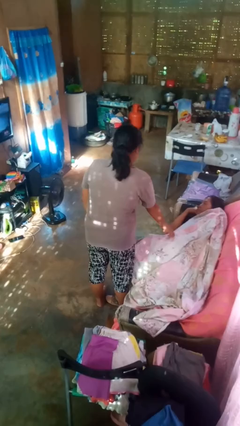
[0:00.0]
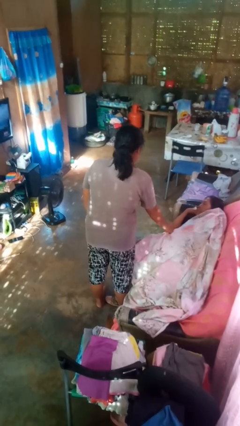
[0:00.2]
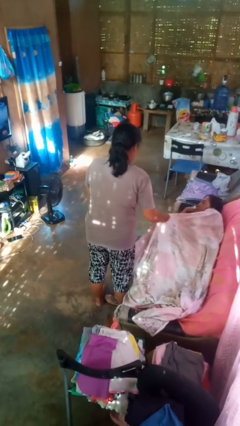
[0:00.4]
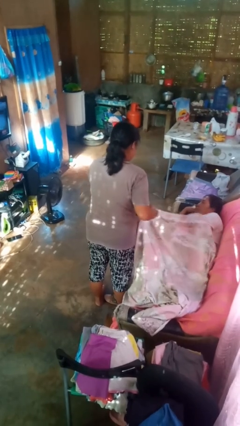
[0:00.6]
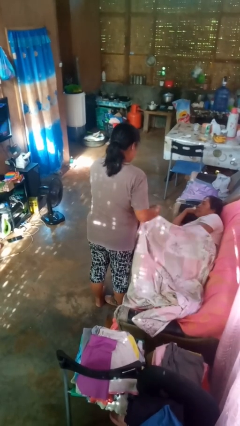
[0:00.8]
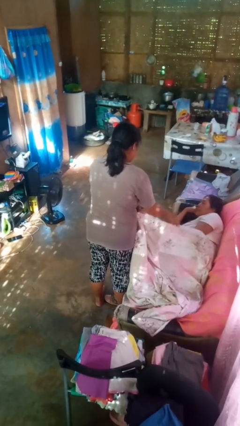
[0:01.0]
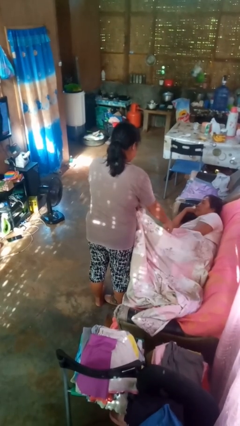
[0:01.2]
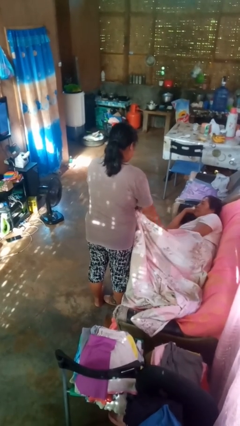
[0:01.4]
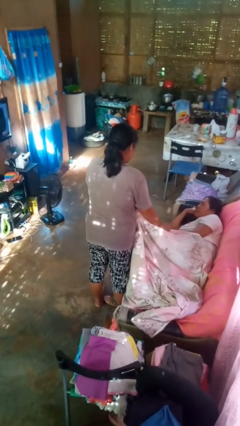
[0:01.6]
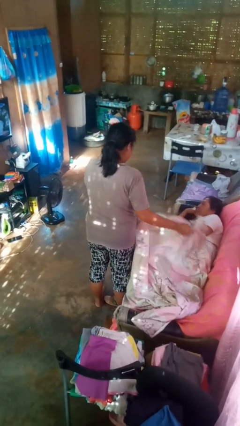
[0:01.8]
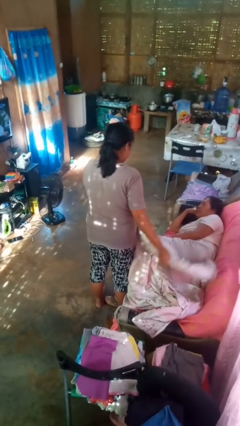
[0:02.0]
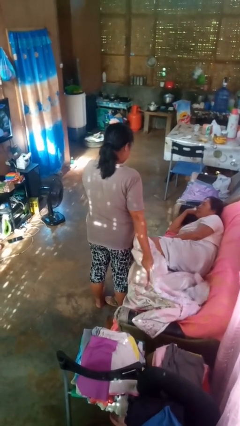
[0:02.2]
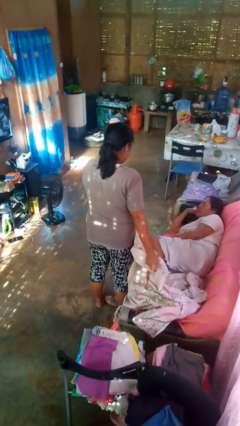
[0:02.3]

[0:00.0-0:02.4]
person uncovers friend with blanket

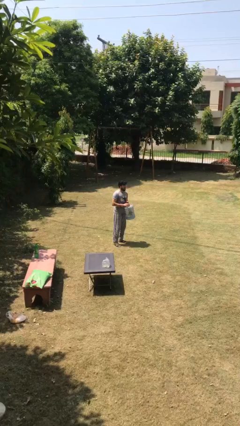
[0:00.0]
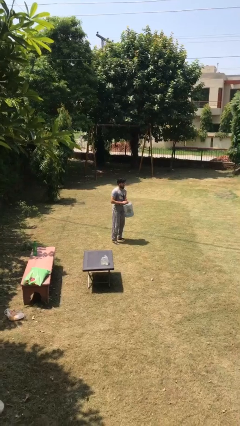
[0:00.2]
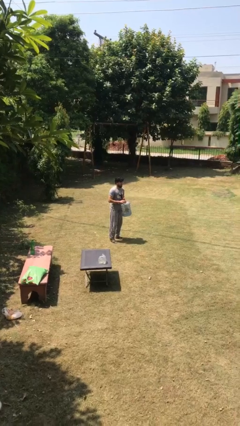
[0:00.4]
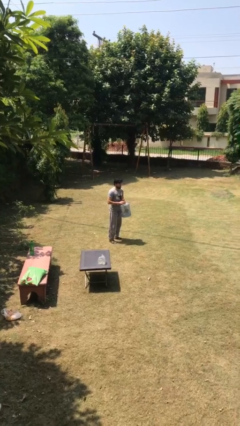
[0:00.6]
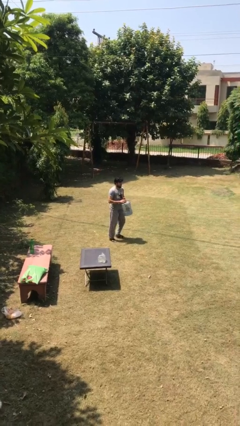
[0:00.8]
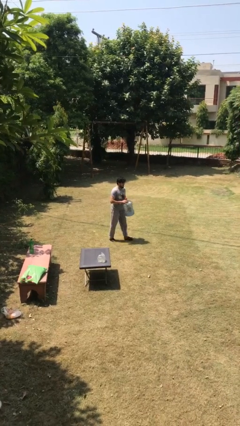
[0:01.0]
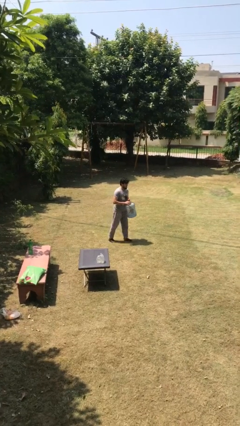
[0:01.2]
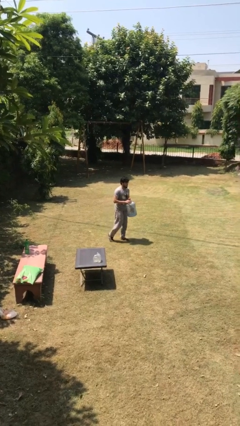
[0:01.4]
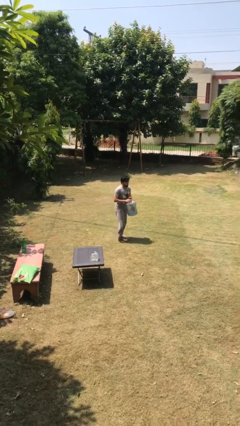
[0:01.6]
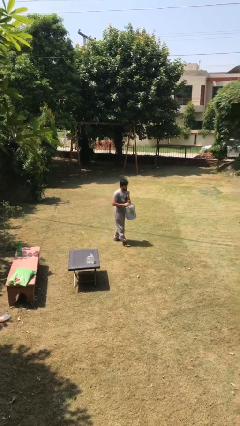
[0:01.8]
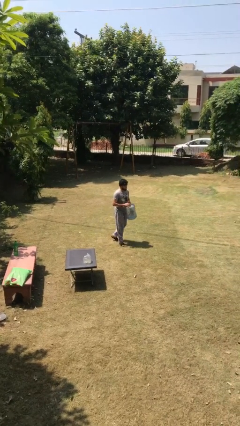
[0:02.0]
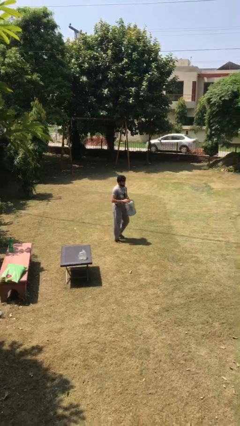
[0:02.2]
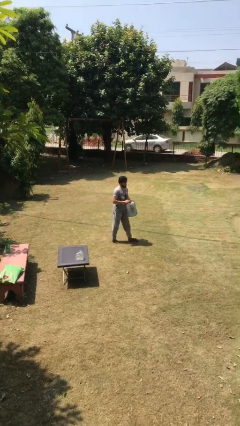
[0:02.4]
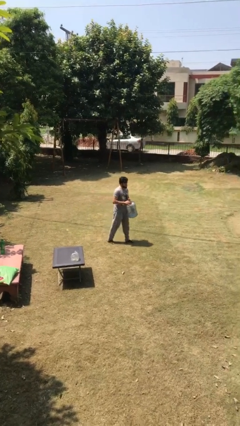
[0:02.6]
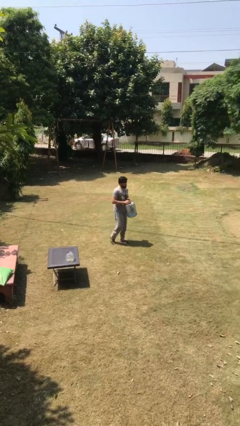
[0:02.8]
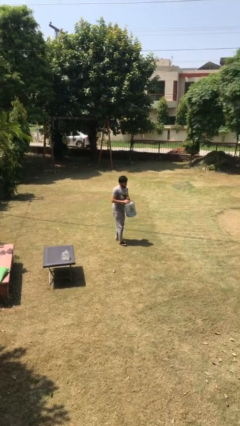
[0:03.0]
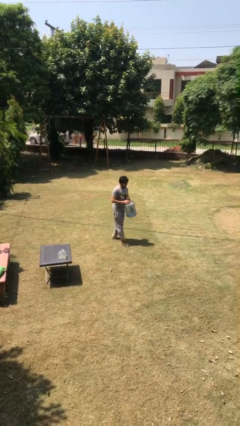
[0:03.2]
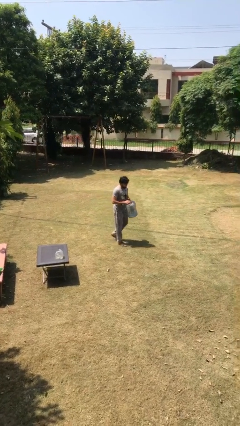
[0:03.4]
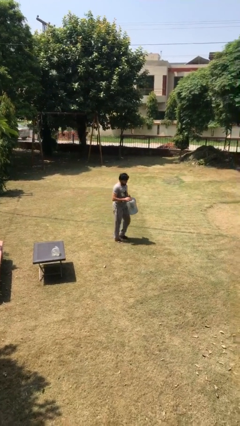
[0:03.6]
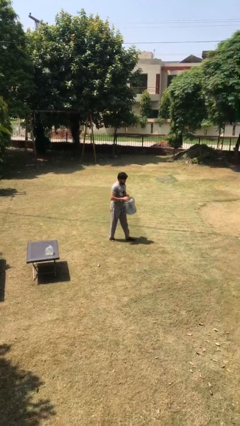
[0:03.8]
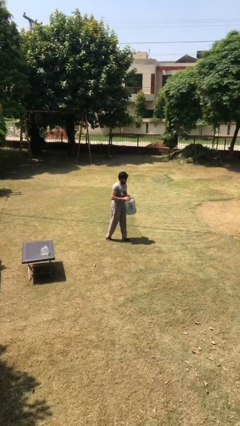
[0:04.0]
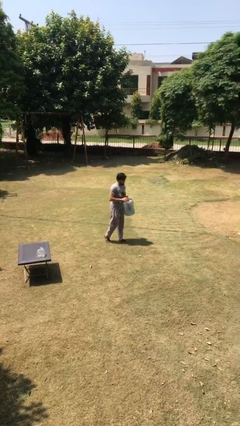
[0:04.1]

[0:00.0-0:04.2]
person carries heavy object

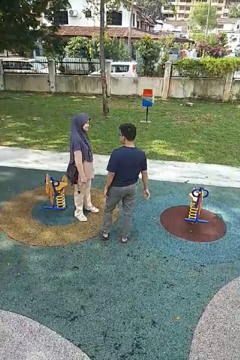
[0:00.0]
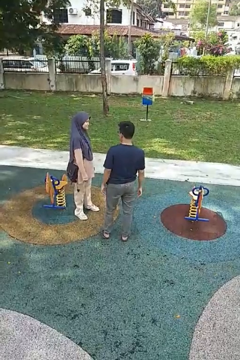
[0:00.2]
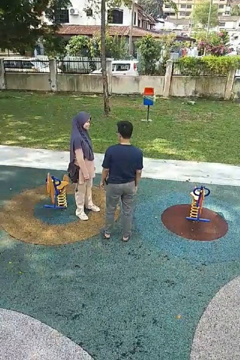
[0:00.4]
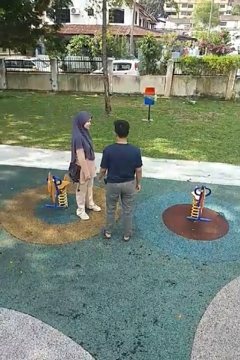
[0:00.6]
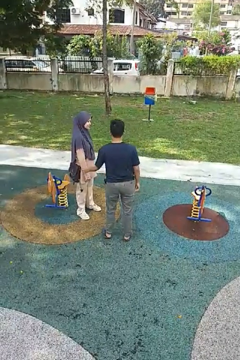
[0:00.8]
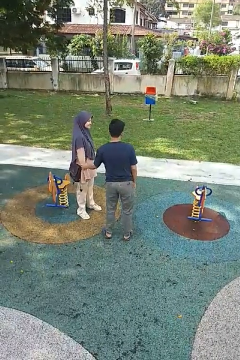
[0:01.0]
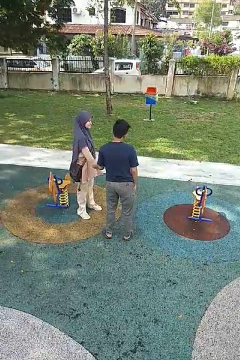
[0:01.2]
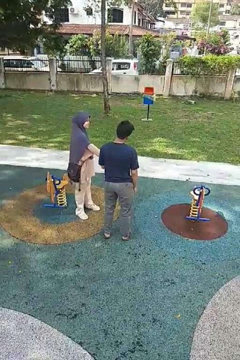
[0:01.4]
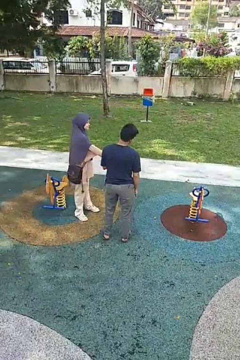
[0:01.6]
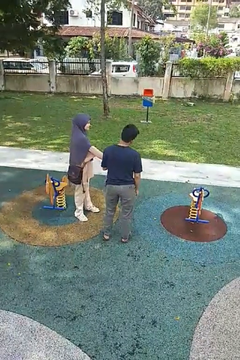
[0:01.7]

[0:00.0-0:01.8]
person grabs person by forearm

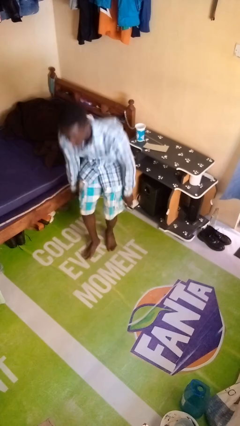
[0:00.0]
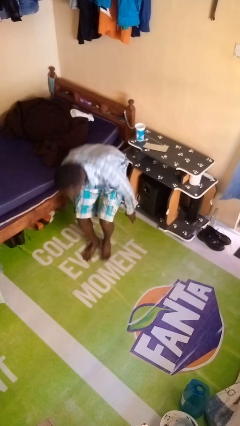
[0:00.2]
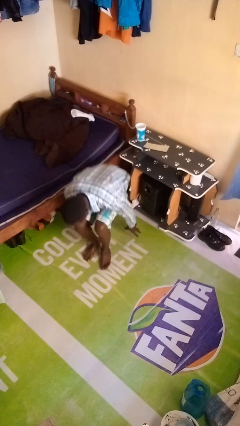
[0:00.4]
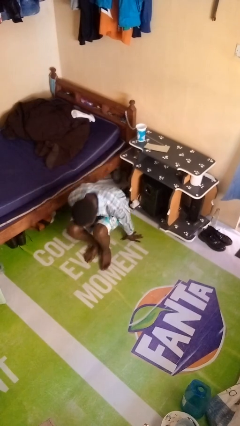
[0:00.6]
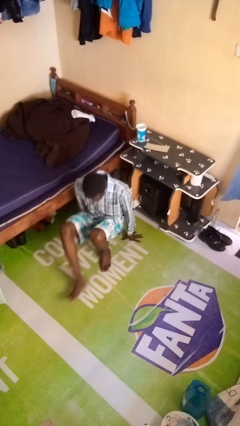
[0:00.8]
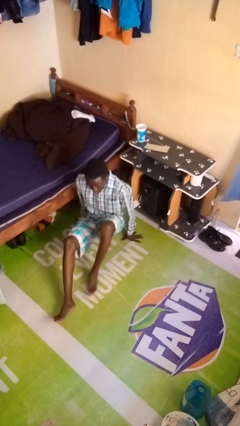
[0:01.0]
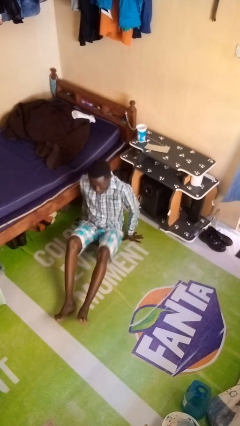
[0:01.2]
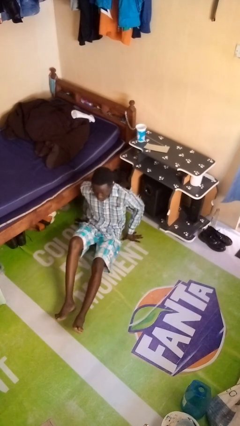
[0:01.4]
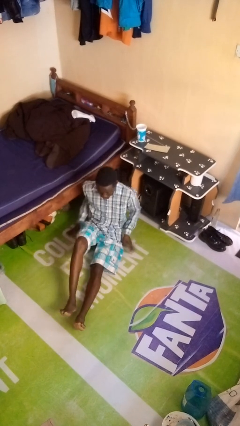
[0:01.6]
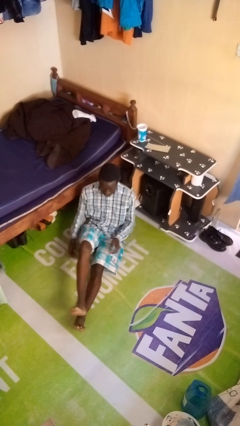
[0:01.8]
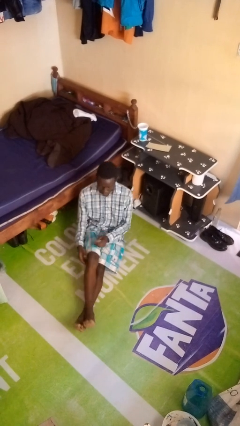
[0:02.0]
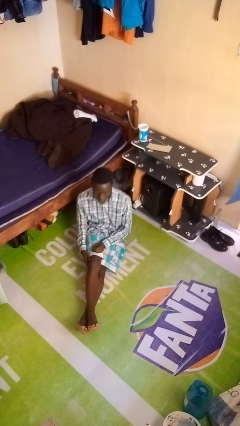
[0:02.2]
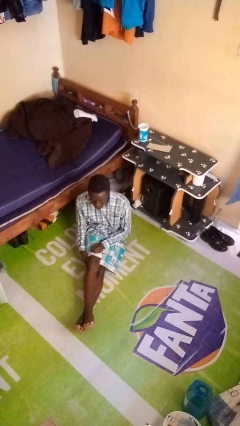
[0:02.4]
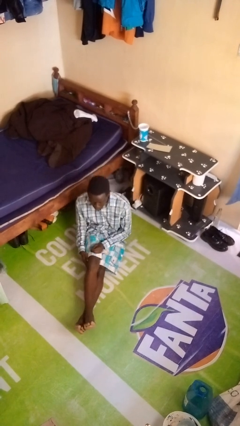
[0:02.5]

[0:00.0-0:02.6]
person sits crisscross

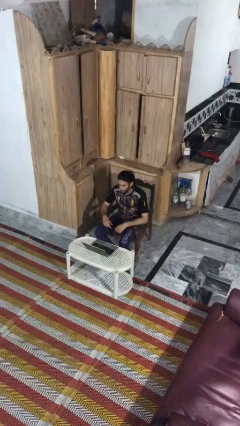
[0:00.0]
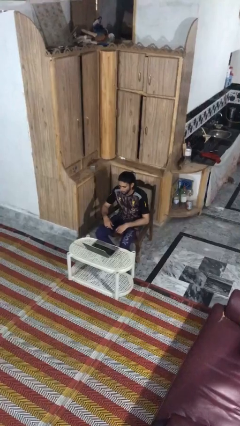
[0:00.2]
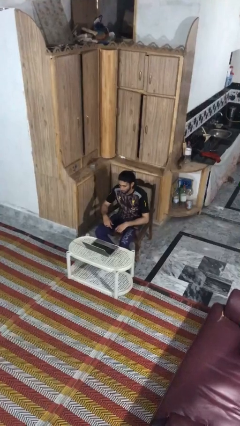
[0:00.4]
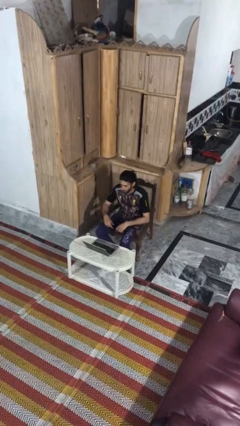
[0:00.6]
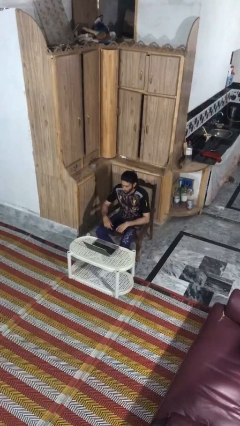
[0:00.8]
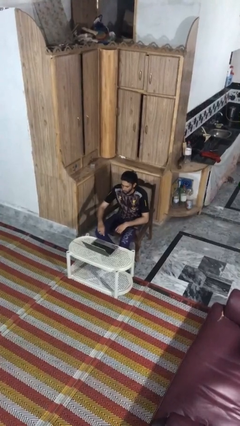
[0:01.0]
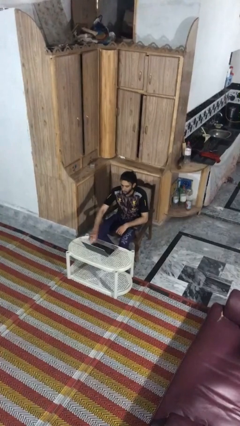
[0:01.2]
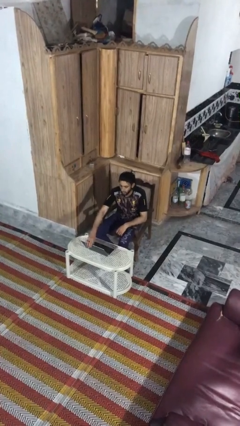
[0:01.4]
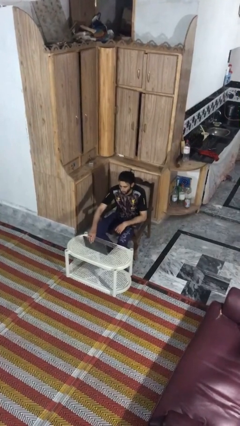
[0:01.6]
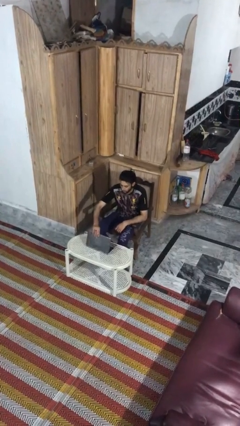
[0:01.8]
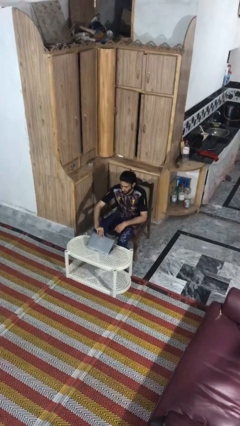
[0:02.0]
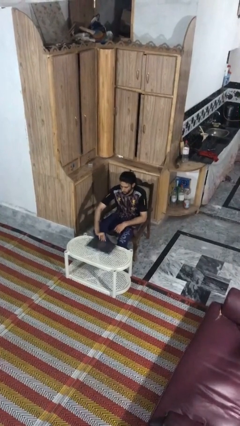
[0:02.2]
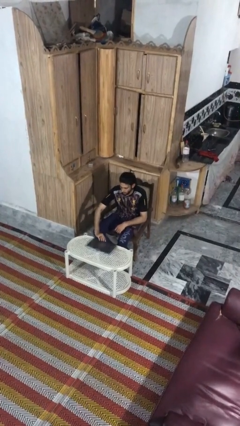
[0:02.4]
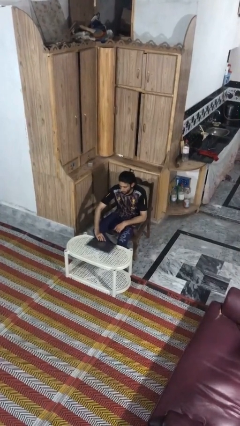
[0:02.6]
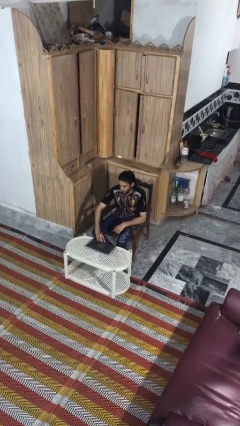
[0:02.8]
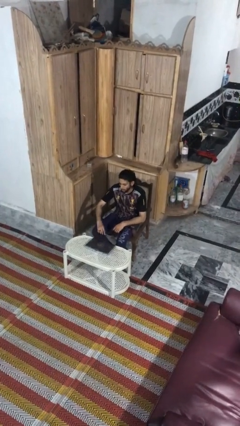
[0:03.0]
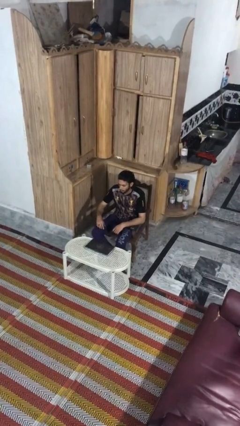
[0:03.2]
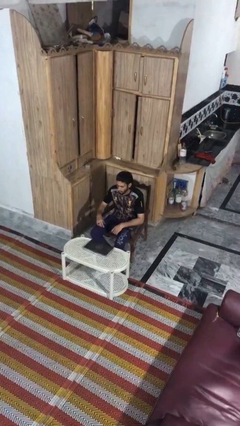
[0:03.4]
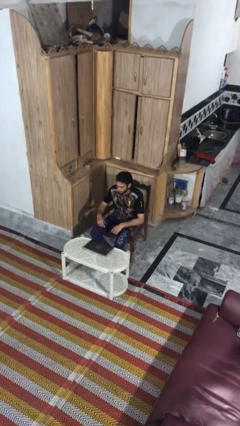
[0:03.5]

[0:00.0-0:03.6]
person closes laptop

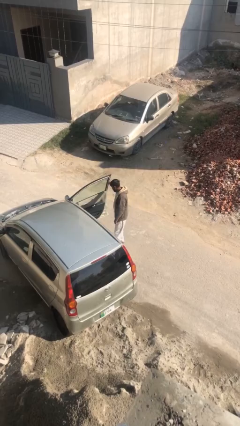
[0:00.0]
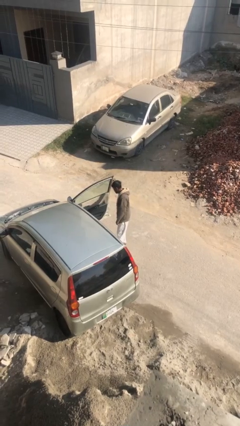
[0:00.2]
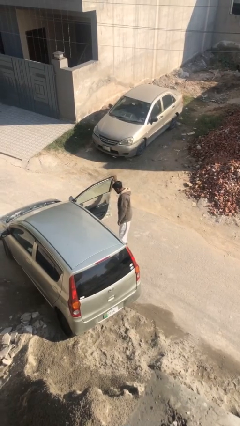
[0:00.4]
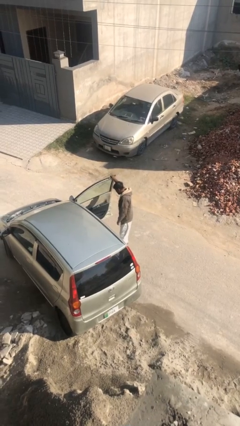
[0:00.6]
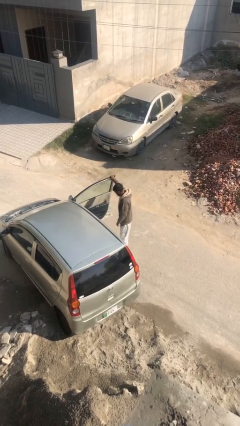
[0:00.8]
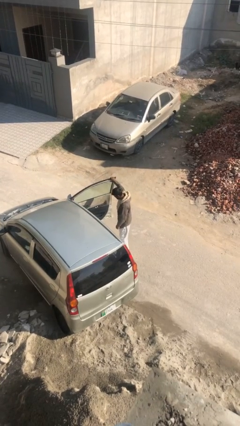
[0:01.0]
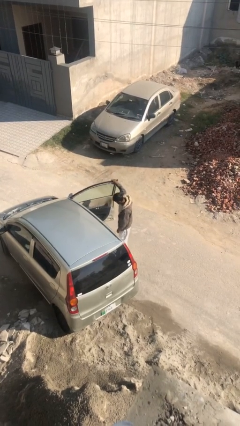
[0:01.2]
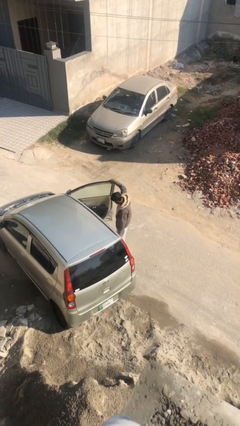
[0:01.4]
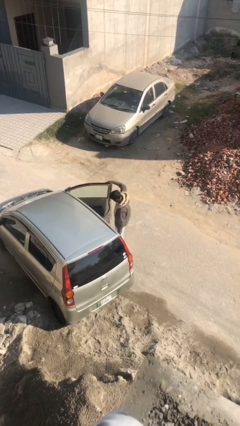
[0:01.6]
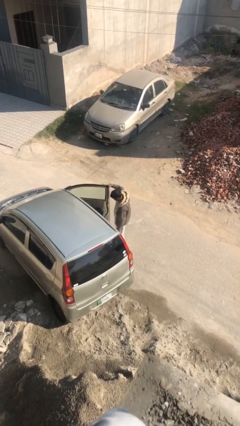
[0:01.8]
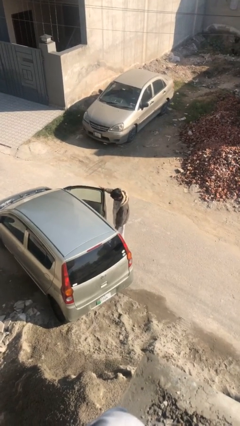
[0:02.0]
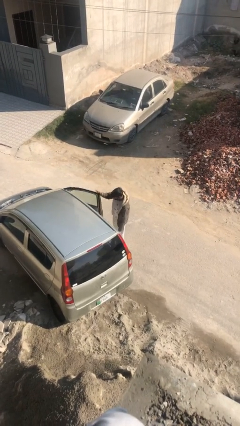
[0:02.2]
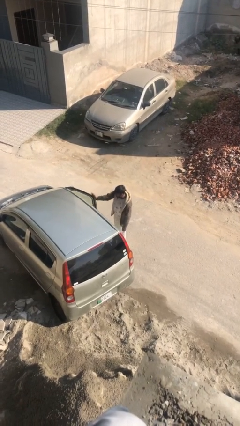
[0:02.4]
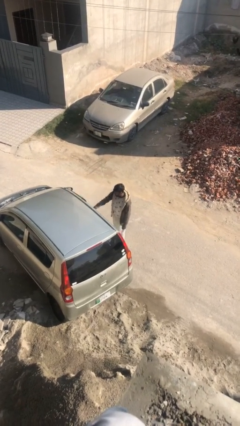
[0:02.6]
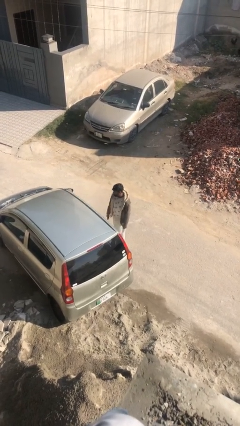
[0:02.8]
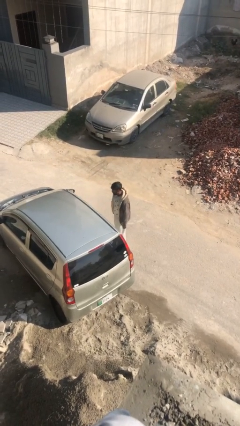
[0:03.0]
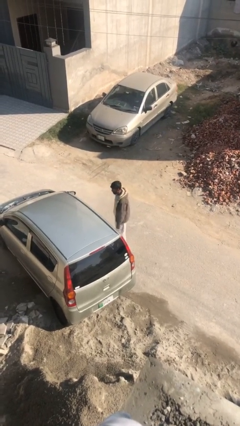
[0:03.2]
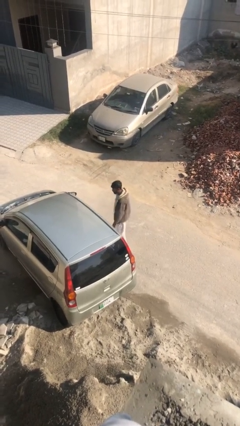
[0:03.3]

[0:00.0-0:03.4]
person closes car door
